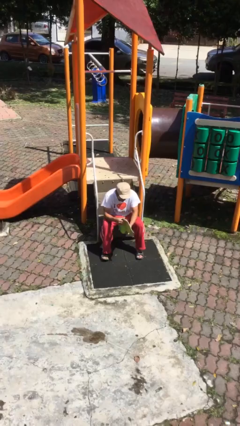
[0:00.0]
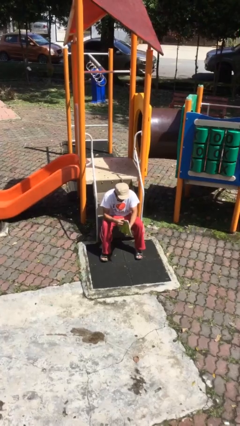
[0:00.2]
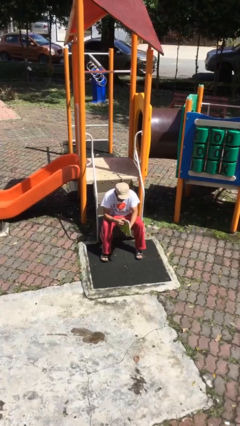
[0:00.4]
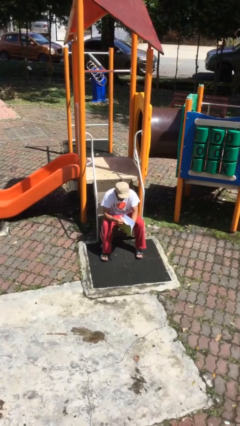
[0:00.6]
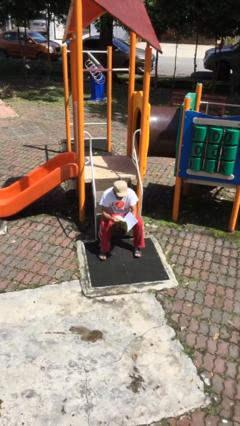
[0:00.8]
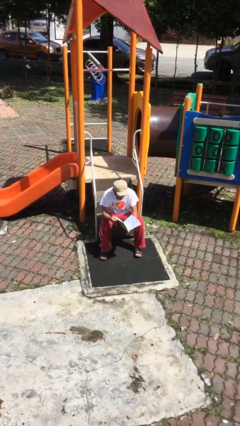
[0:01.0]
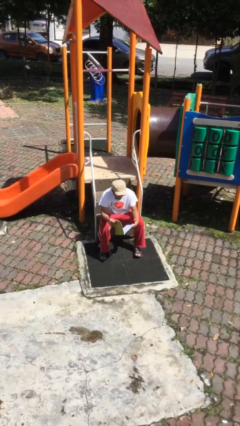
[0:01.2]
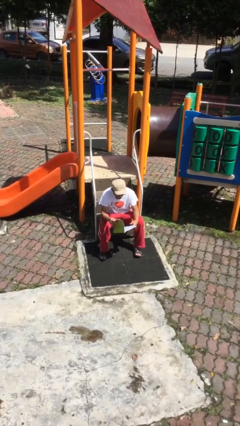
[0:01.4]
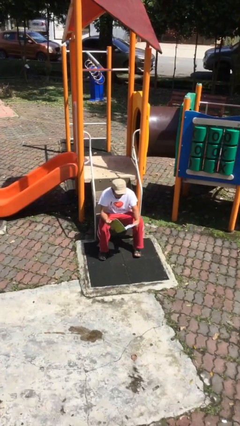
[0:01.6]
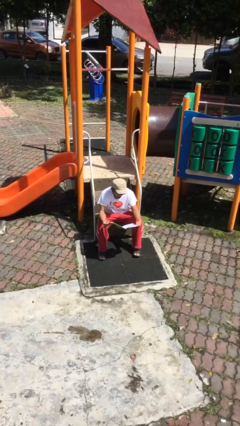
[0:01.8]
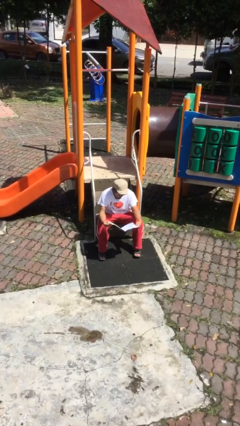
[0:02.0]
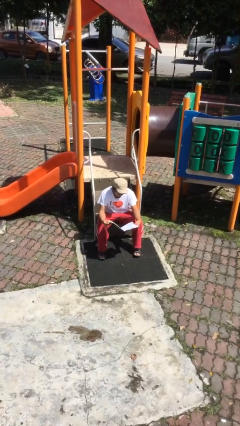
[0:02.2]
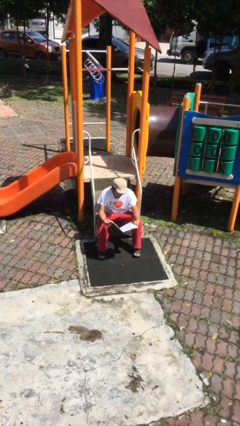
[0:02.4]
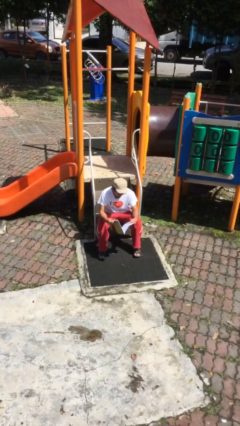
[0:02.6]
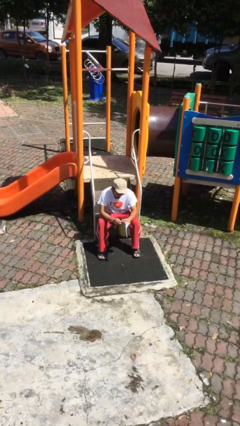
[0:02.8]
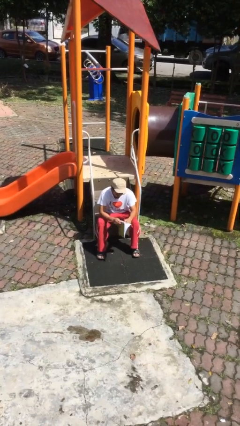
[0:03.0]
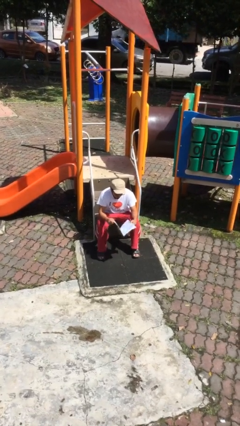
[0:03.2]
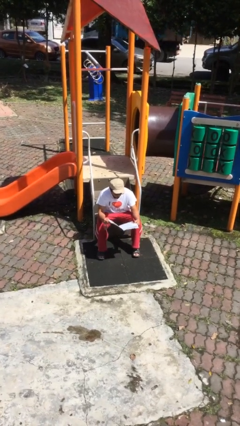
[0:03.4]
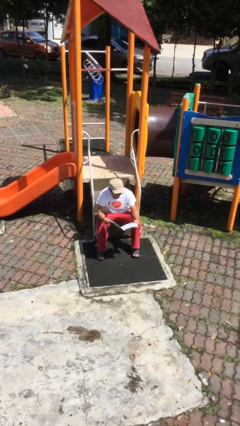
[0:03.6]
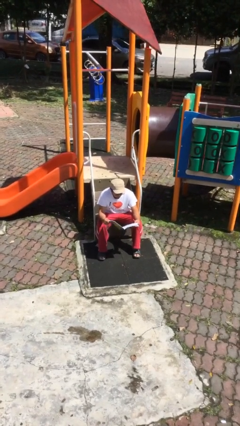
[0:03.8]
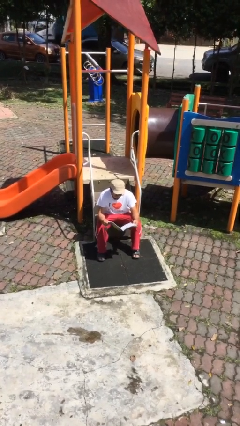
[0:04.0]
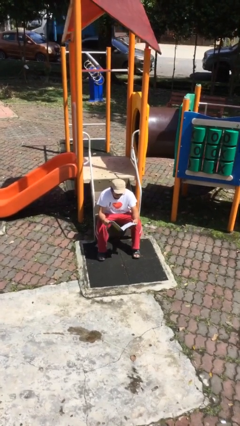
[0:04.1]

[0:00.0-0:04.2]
person reads document

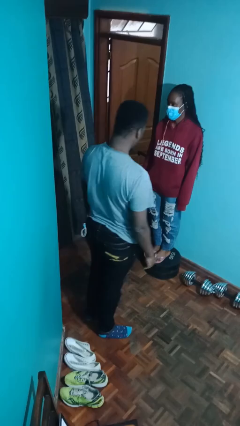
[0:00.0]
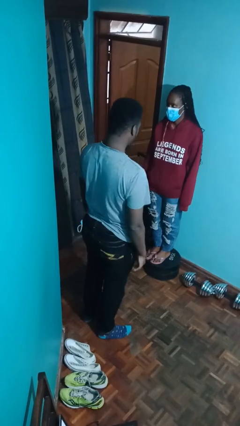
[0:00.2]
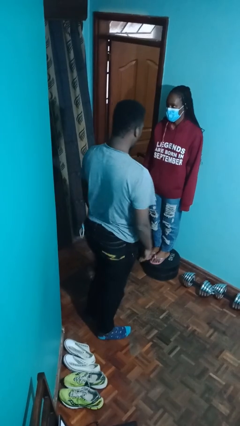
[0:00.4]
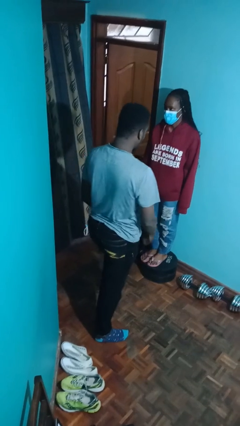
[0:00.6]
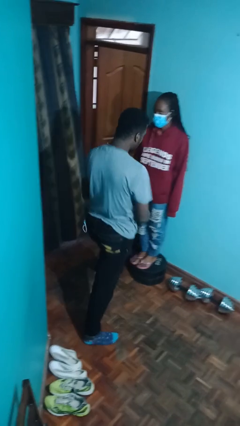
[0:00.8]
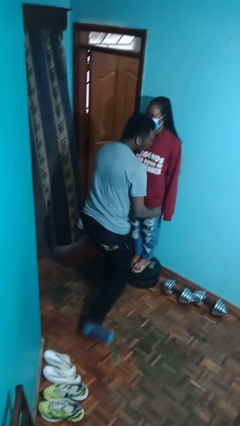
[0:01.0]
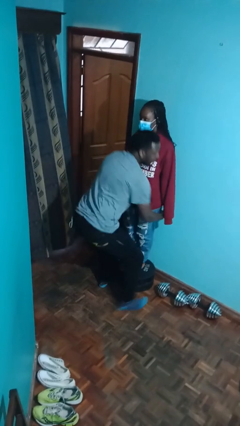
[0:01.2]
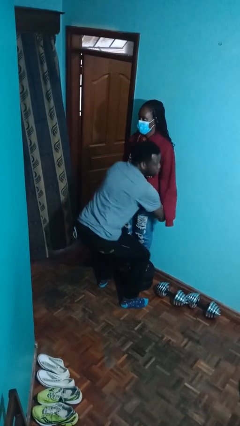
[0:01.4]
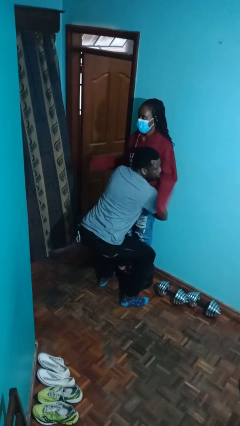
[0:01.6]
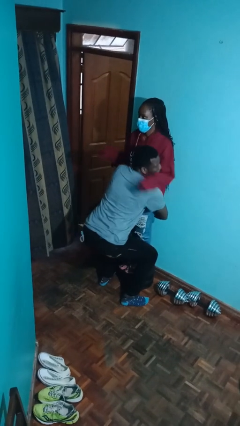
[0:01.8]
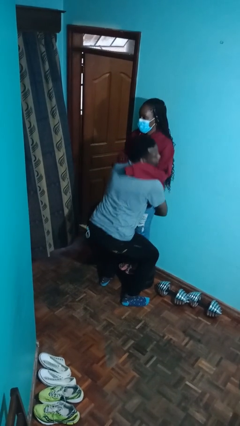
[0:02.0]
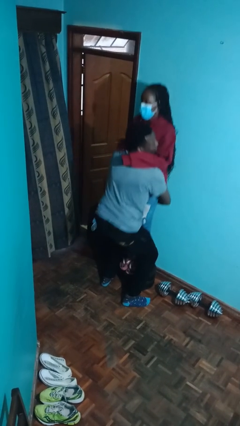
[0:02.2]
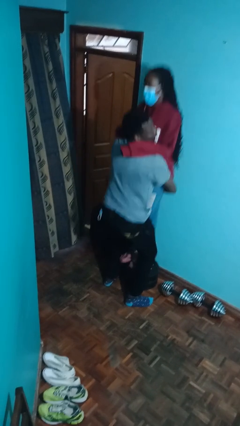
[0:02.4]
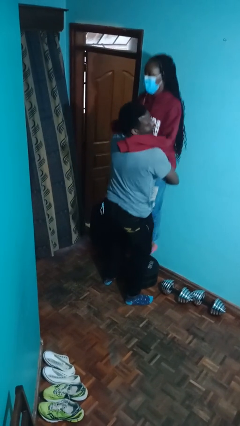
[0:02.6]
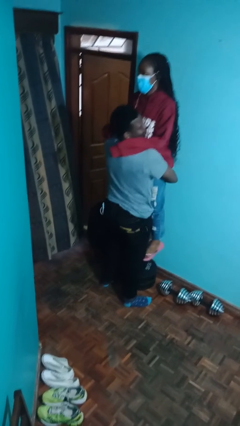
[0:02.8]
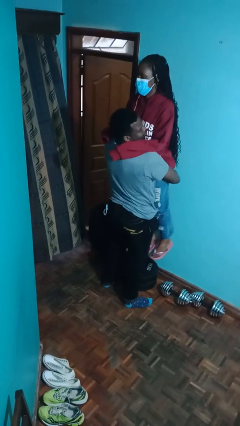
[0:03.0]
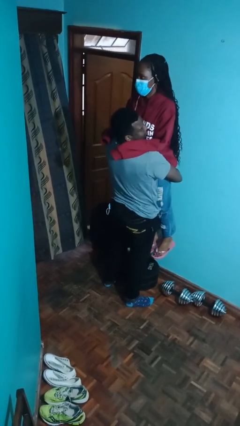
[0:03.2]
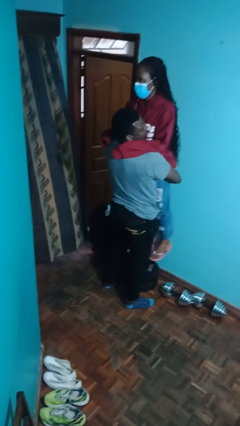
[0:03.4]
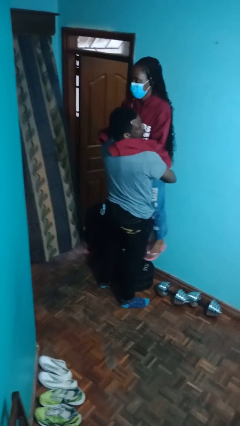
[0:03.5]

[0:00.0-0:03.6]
person picks up person

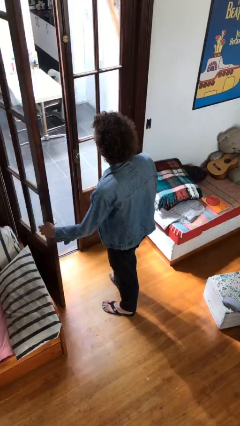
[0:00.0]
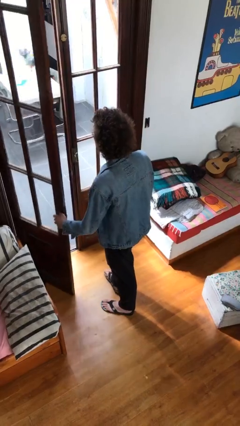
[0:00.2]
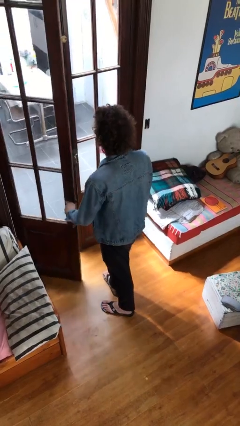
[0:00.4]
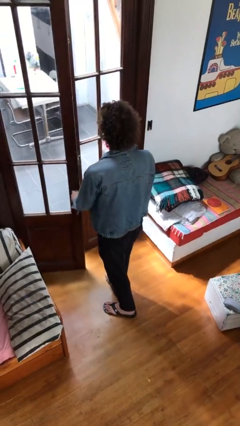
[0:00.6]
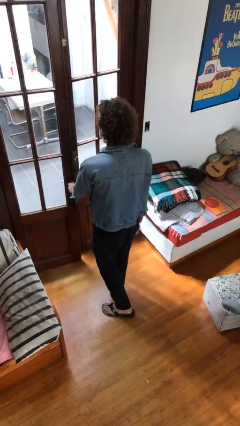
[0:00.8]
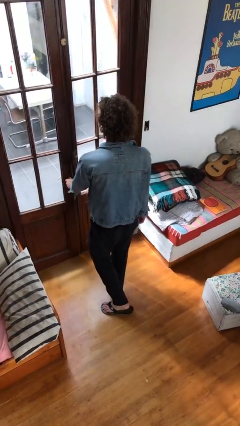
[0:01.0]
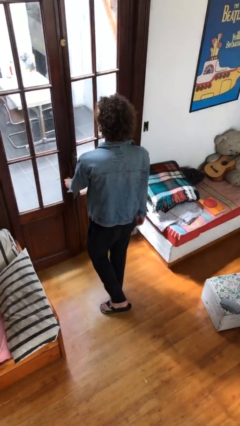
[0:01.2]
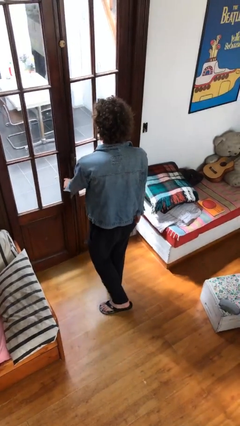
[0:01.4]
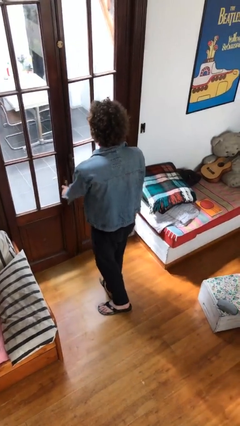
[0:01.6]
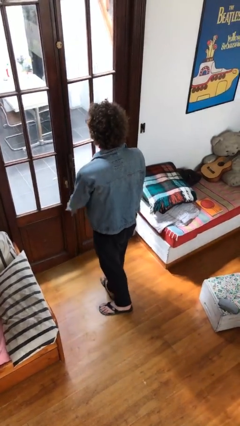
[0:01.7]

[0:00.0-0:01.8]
person closes facility door

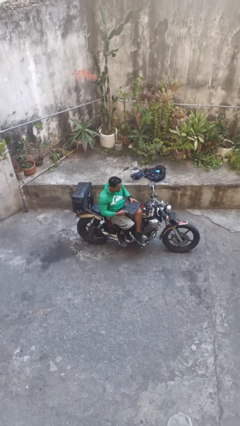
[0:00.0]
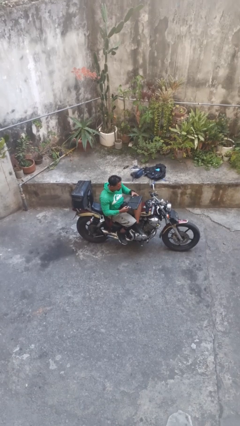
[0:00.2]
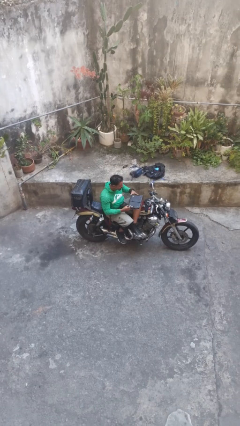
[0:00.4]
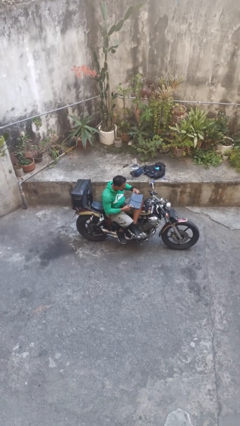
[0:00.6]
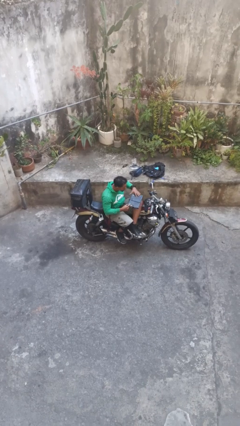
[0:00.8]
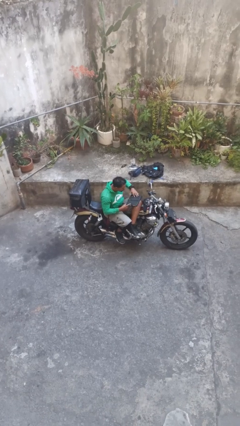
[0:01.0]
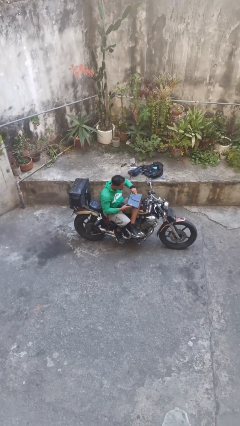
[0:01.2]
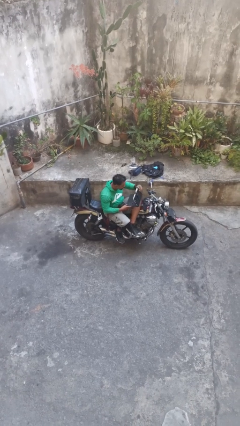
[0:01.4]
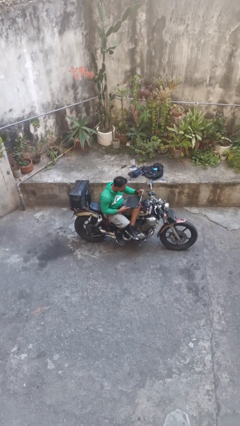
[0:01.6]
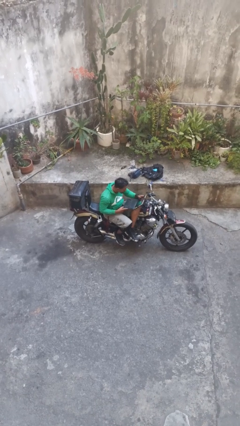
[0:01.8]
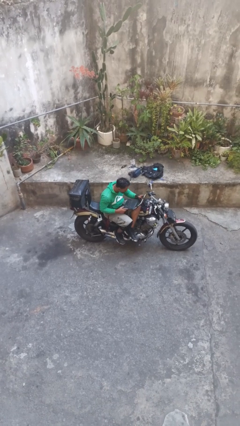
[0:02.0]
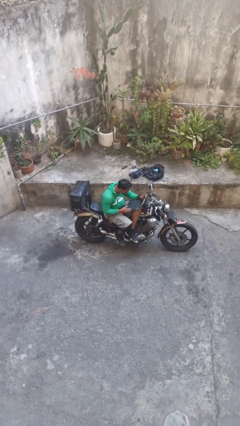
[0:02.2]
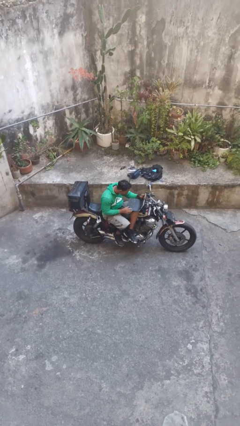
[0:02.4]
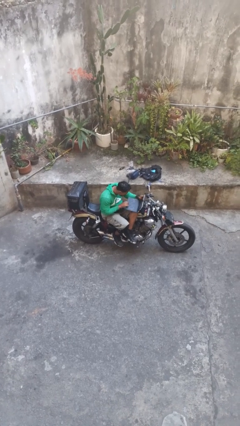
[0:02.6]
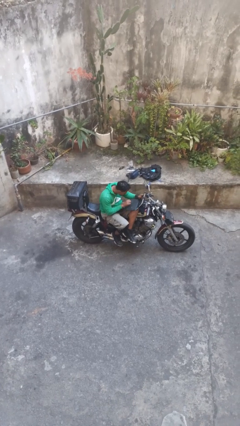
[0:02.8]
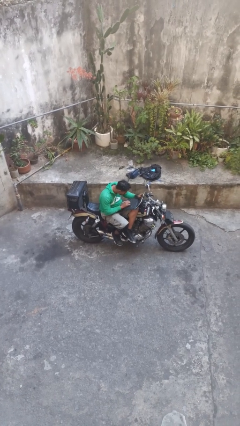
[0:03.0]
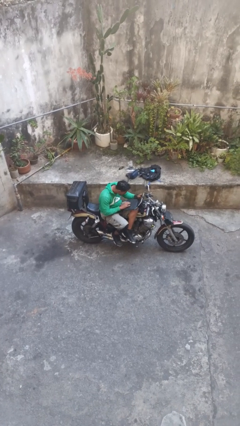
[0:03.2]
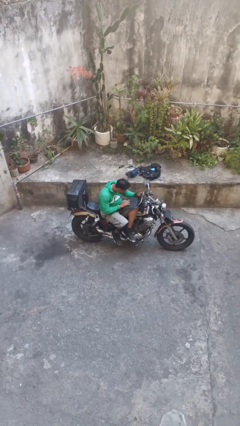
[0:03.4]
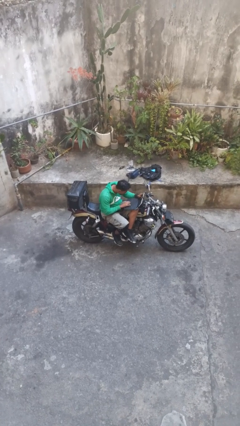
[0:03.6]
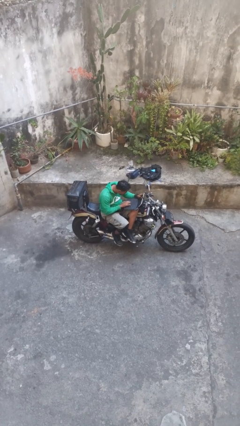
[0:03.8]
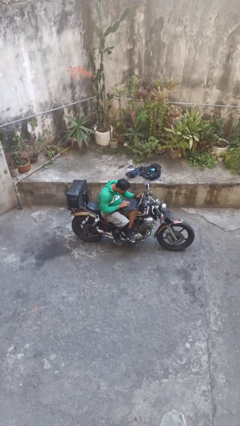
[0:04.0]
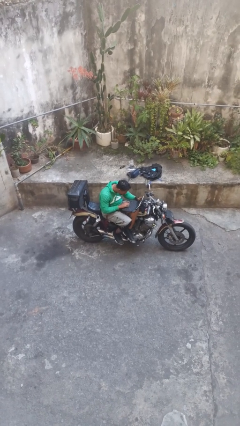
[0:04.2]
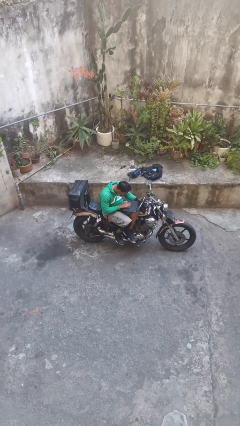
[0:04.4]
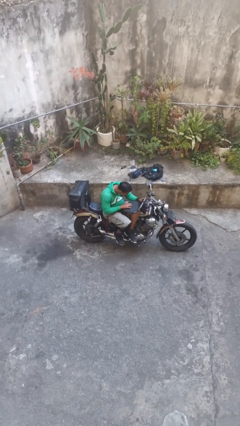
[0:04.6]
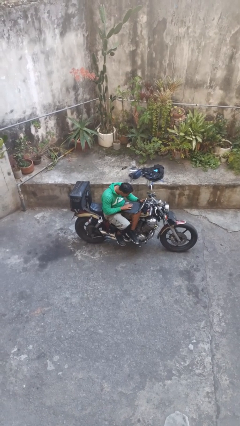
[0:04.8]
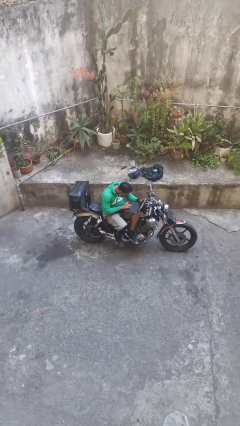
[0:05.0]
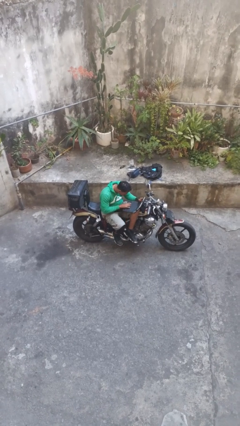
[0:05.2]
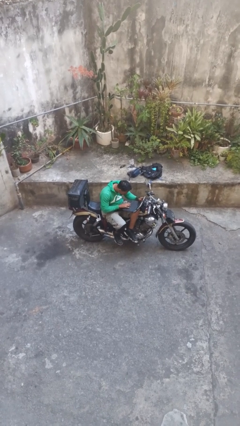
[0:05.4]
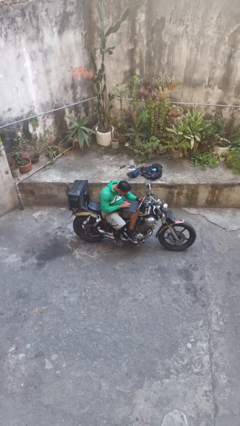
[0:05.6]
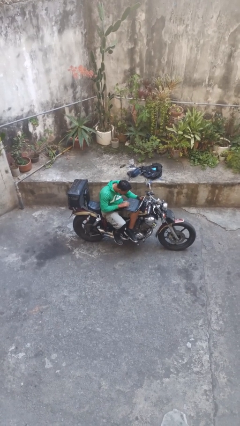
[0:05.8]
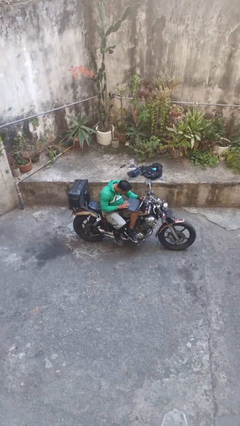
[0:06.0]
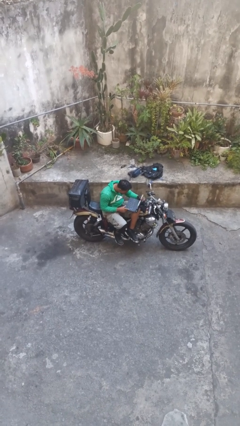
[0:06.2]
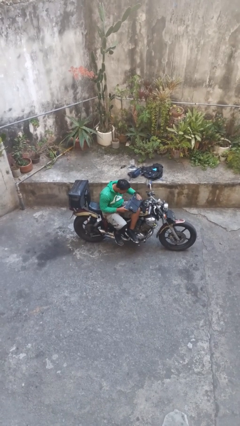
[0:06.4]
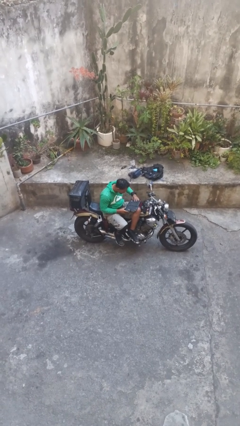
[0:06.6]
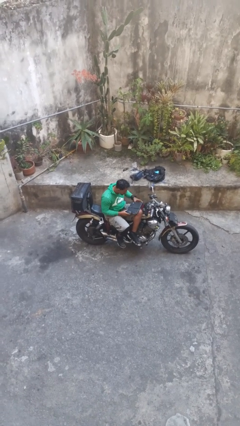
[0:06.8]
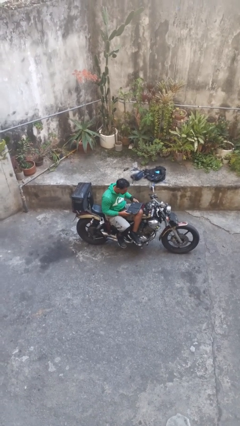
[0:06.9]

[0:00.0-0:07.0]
person interacts with laptop

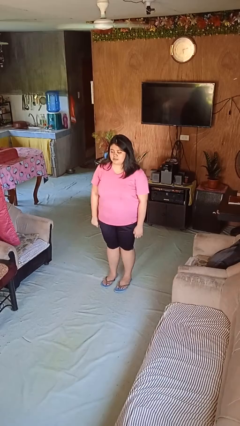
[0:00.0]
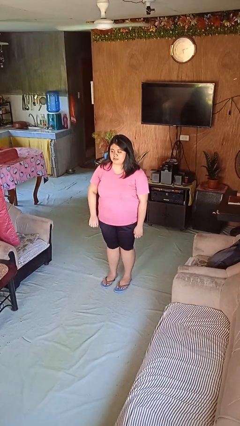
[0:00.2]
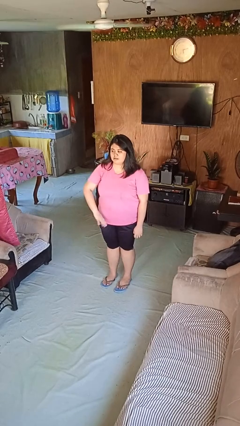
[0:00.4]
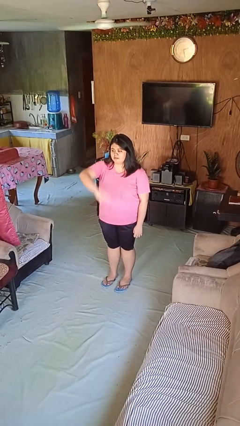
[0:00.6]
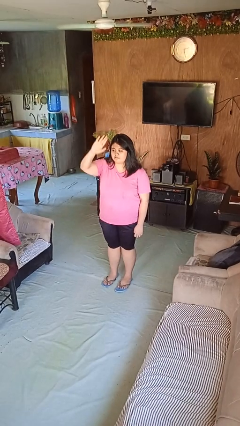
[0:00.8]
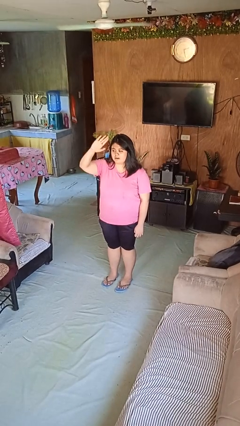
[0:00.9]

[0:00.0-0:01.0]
person gestures swipe up
